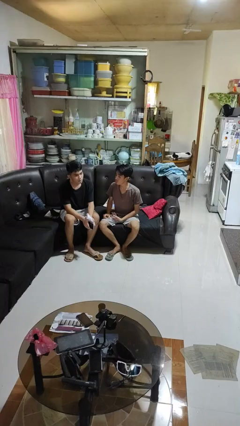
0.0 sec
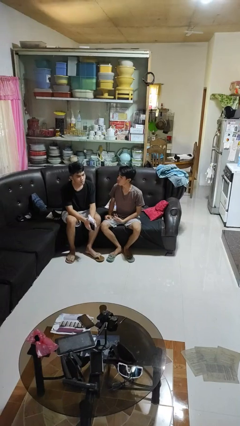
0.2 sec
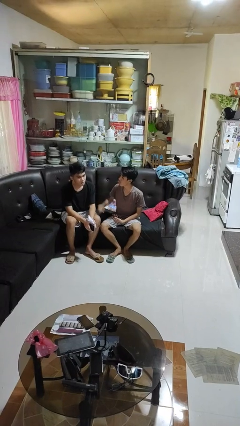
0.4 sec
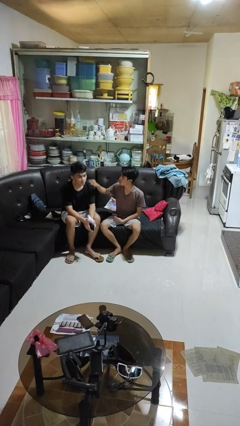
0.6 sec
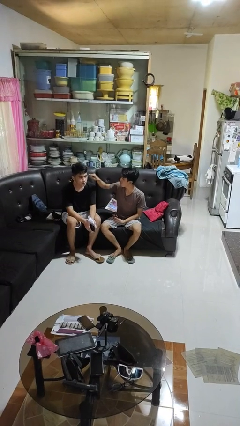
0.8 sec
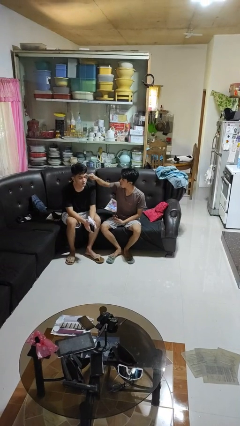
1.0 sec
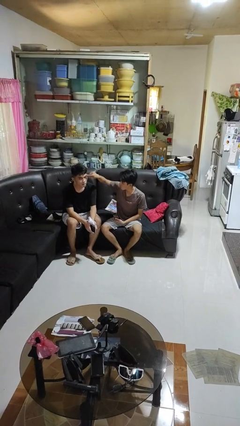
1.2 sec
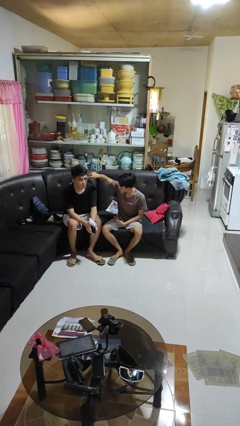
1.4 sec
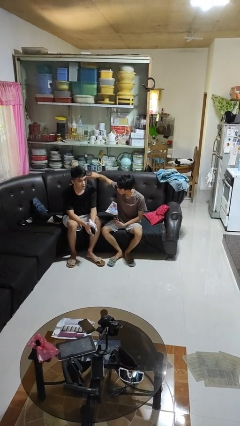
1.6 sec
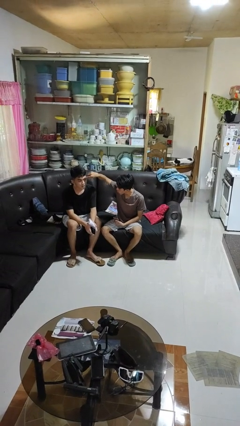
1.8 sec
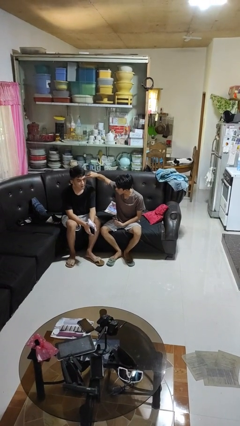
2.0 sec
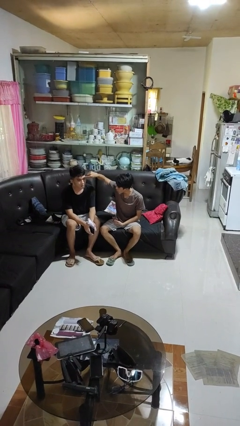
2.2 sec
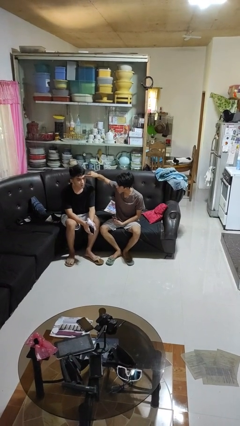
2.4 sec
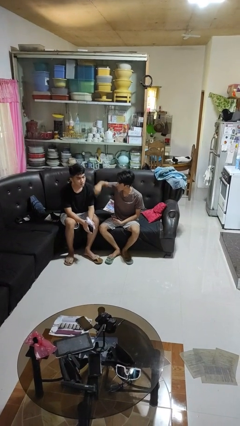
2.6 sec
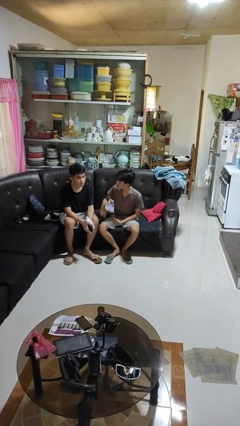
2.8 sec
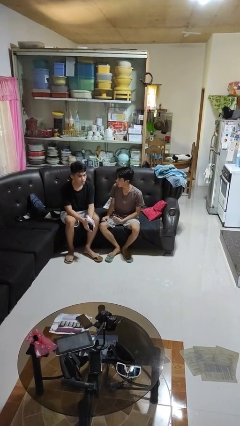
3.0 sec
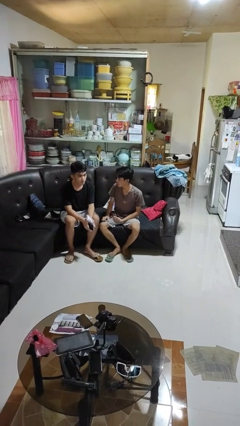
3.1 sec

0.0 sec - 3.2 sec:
person touches face of person

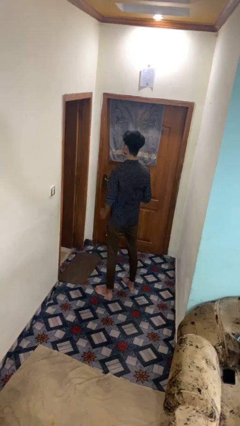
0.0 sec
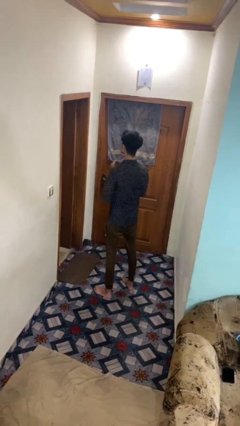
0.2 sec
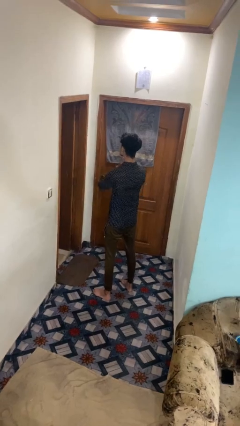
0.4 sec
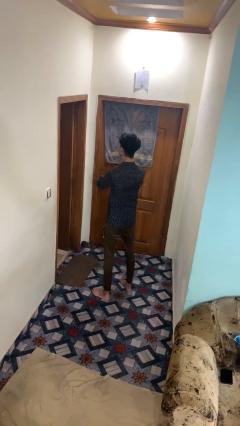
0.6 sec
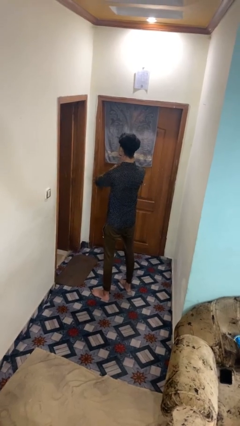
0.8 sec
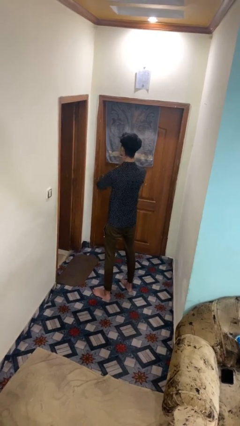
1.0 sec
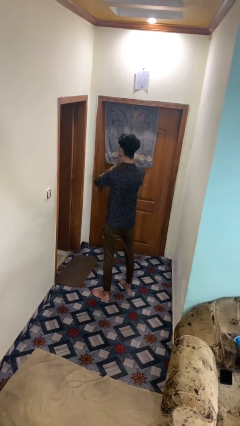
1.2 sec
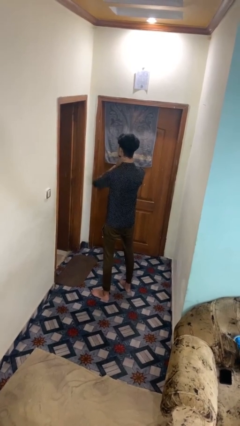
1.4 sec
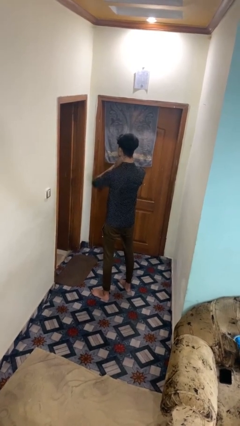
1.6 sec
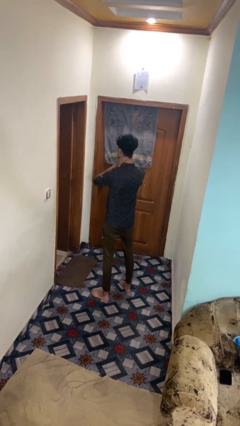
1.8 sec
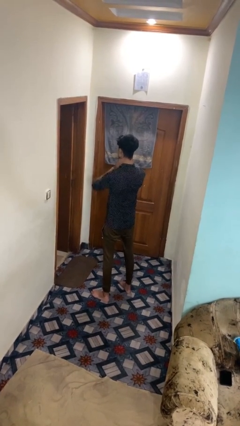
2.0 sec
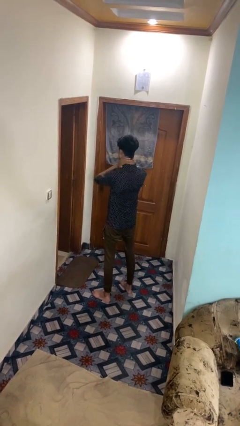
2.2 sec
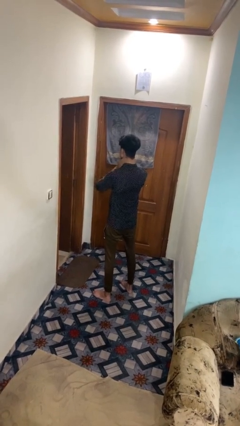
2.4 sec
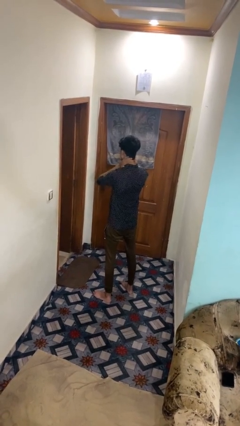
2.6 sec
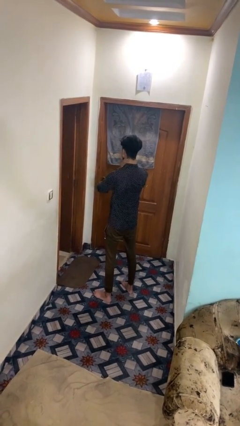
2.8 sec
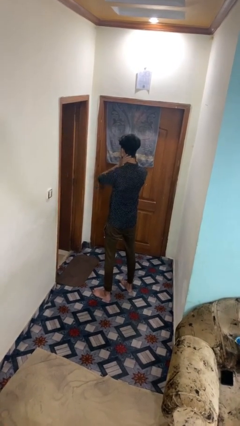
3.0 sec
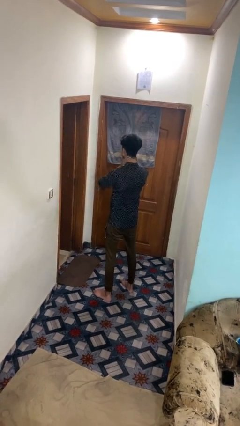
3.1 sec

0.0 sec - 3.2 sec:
person rubs neck

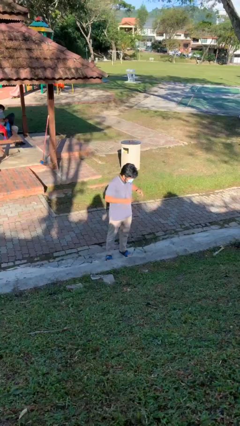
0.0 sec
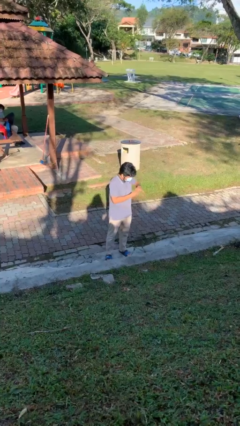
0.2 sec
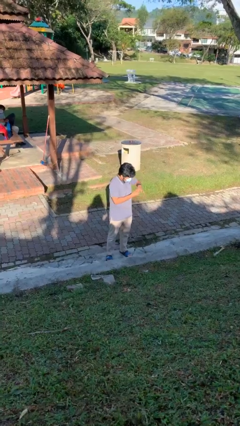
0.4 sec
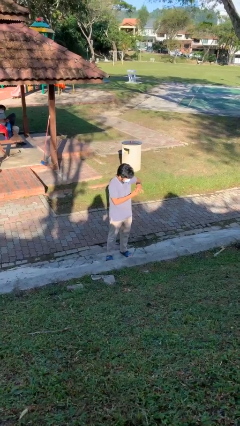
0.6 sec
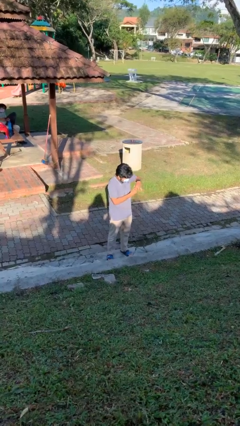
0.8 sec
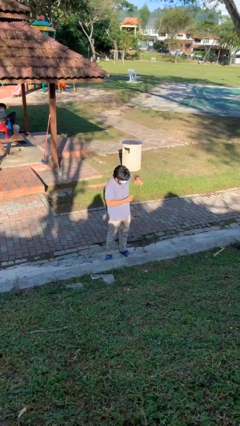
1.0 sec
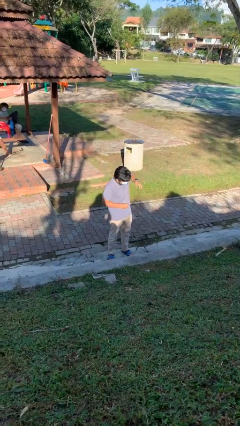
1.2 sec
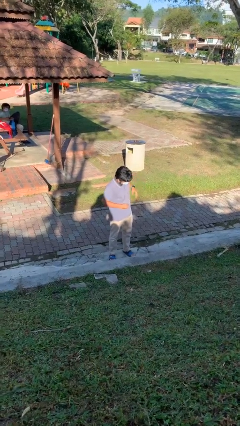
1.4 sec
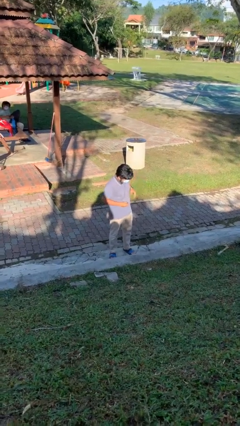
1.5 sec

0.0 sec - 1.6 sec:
person takes off ring

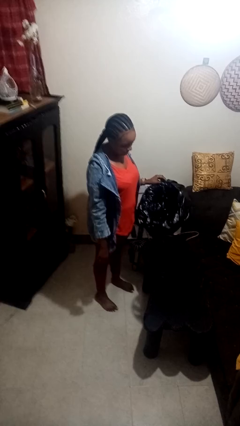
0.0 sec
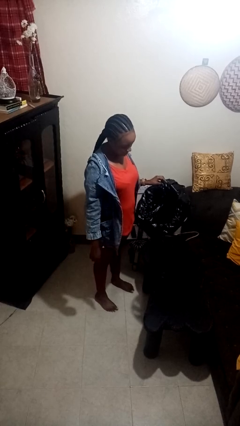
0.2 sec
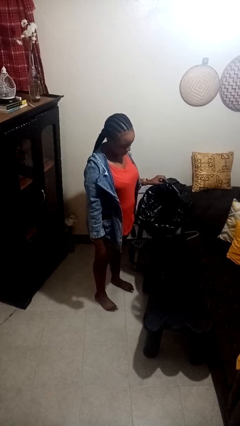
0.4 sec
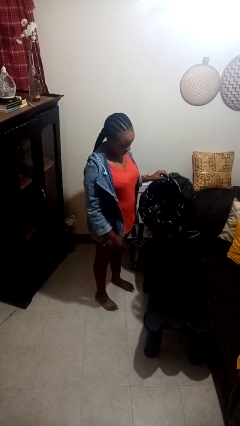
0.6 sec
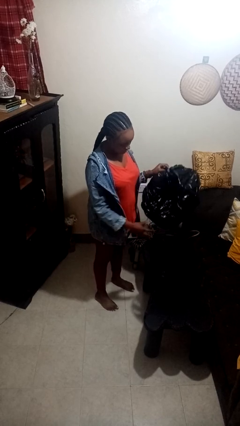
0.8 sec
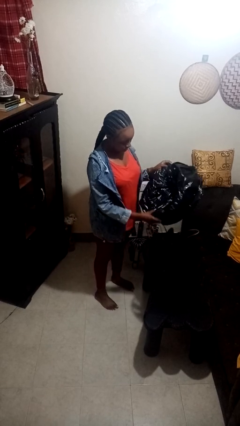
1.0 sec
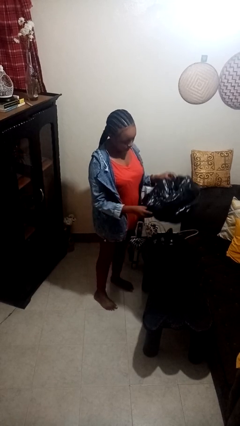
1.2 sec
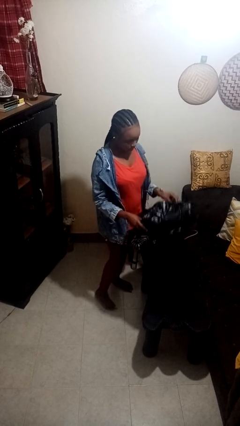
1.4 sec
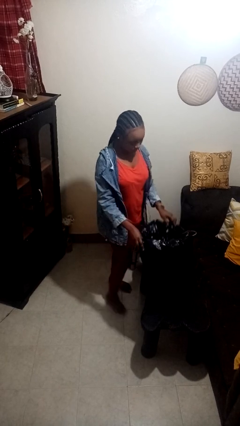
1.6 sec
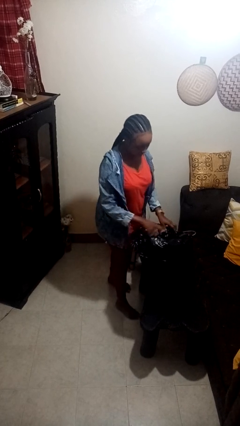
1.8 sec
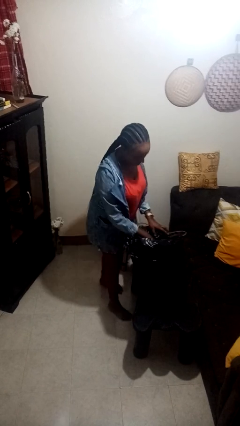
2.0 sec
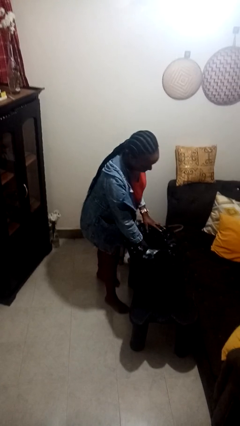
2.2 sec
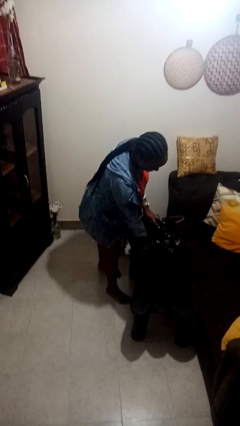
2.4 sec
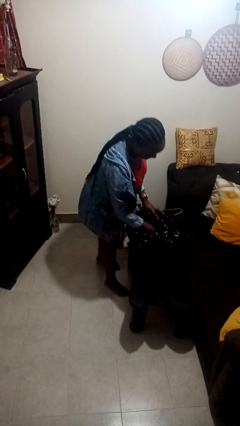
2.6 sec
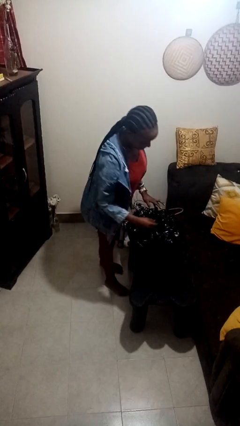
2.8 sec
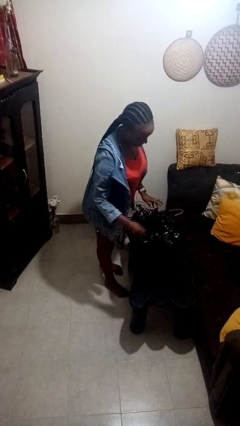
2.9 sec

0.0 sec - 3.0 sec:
person inserts trashbag into trashcan

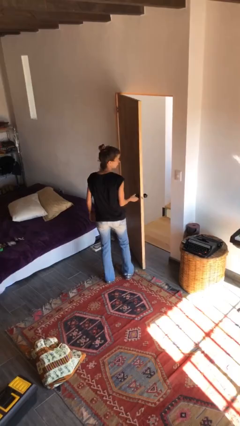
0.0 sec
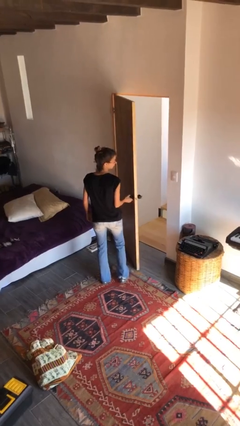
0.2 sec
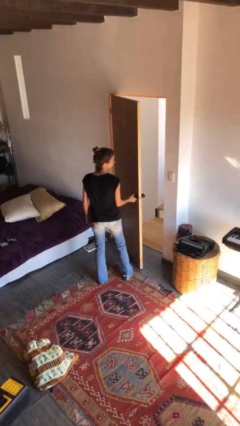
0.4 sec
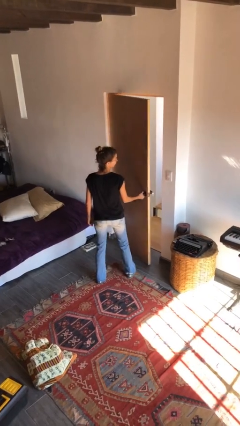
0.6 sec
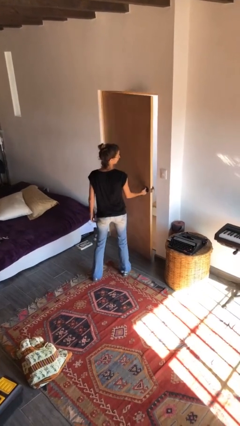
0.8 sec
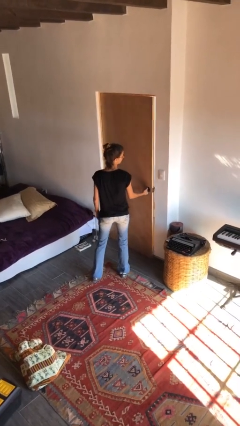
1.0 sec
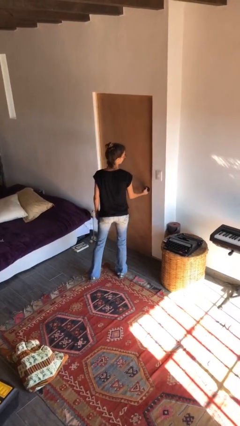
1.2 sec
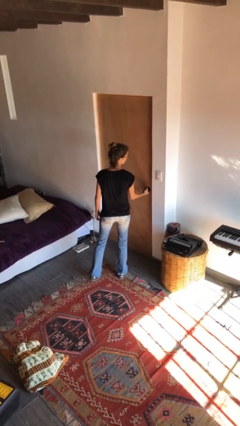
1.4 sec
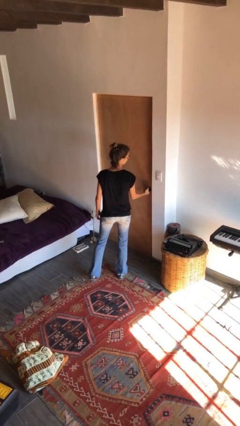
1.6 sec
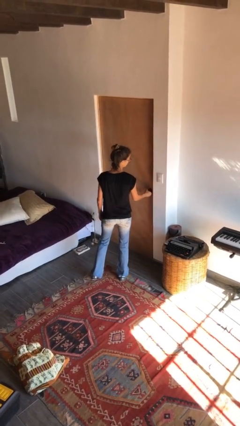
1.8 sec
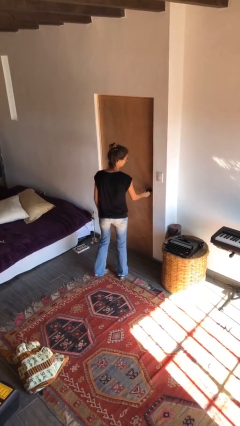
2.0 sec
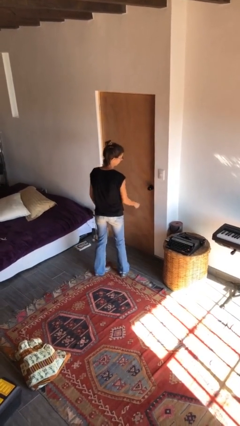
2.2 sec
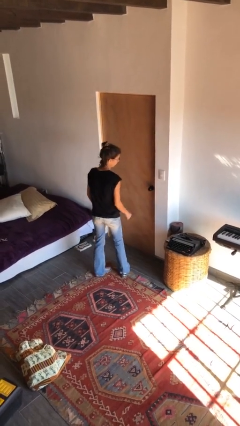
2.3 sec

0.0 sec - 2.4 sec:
person closes facility door

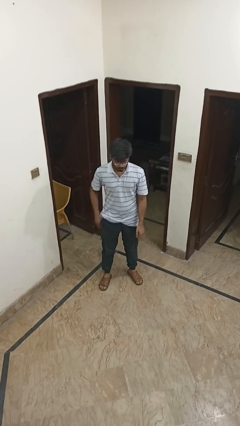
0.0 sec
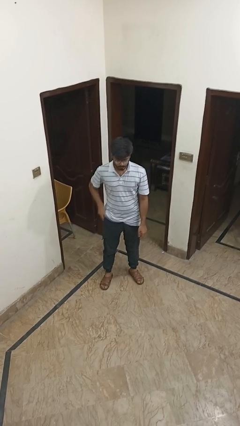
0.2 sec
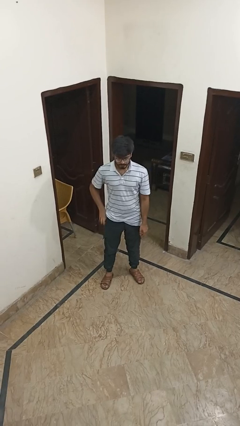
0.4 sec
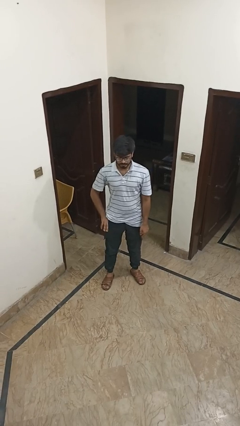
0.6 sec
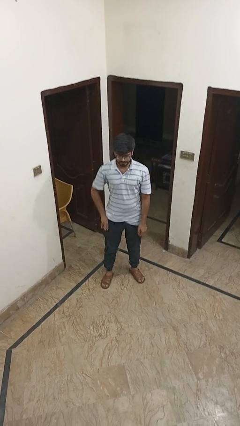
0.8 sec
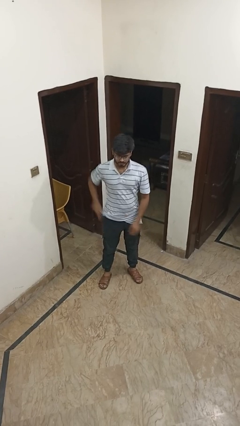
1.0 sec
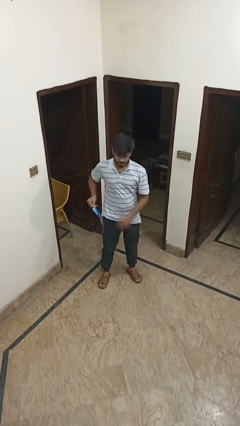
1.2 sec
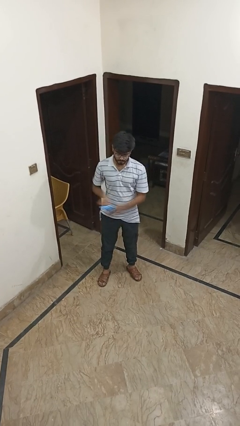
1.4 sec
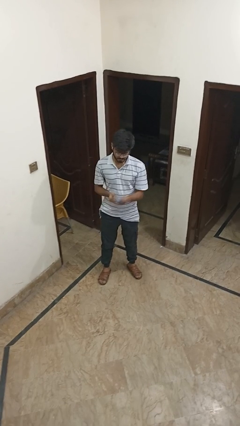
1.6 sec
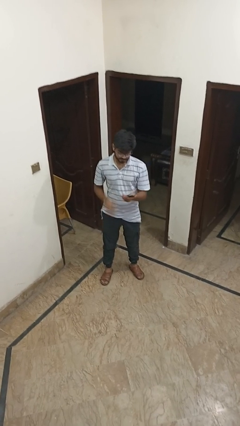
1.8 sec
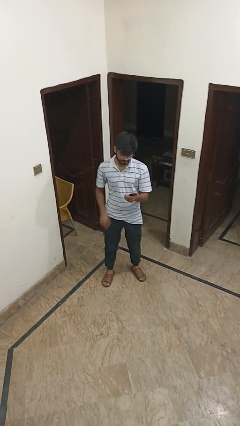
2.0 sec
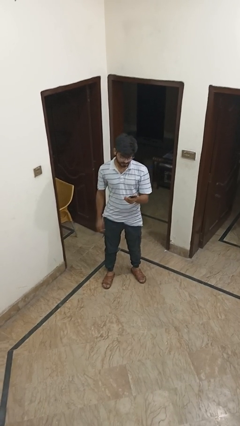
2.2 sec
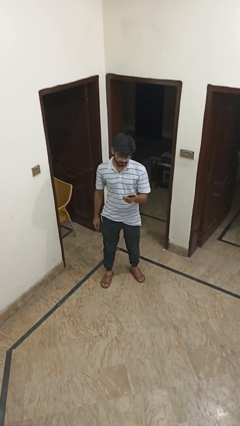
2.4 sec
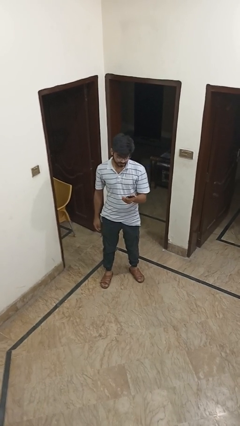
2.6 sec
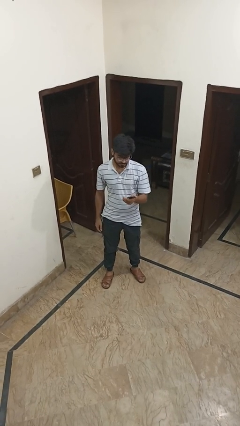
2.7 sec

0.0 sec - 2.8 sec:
person takes phone from pocket

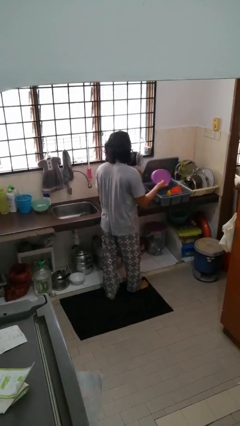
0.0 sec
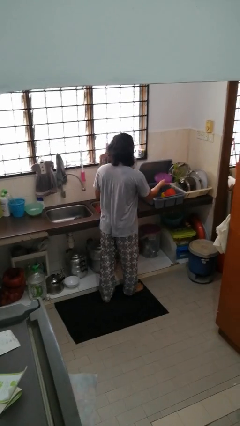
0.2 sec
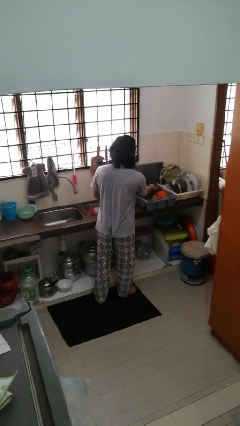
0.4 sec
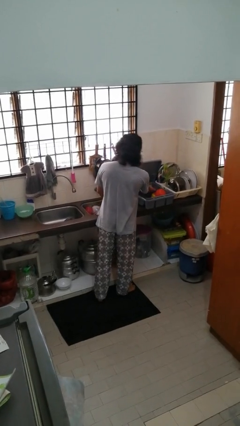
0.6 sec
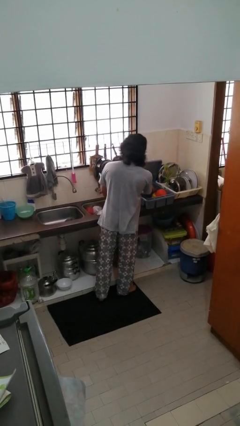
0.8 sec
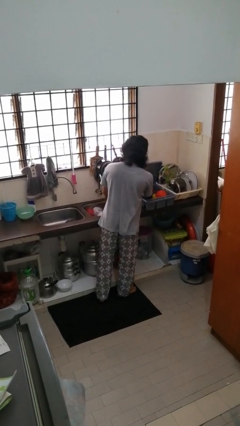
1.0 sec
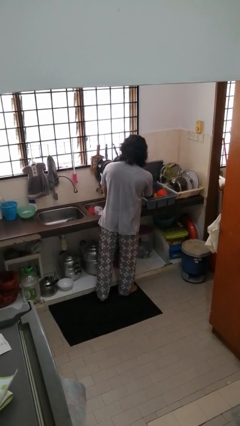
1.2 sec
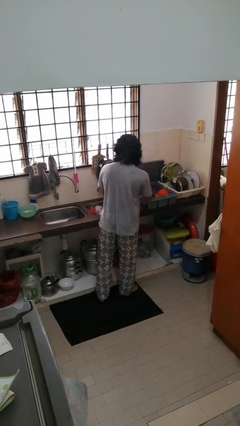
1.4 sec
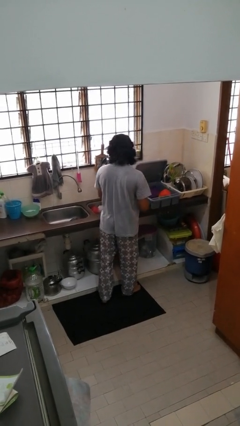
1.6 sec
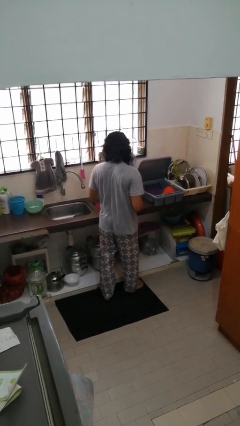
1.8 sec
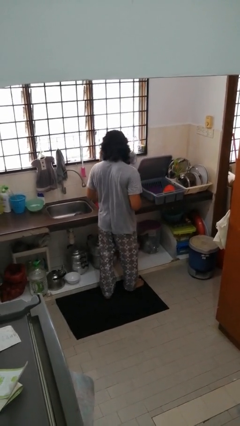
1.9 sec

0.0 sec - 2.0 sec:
person loads dishwasher
